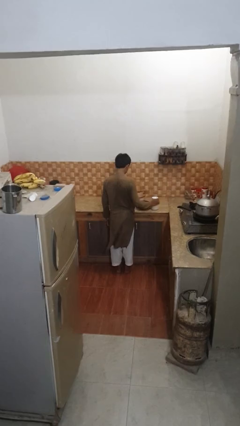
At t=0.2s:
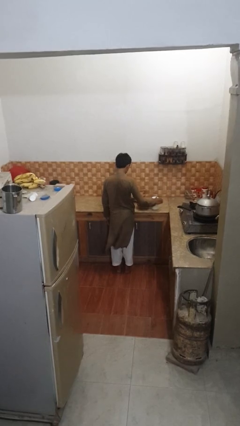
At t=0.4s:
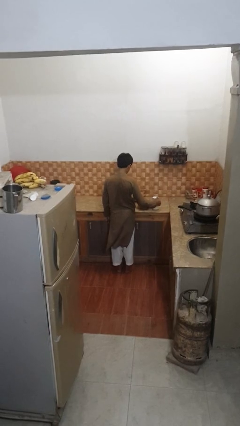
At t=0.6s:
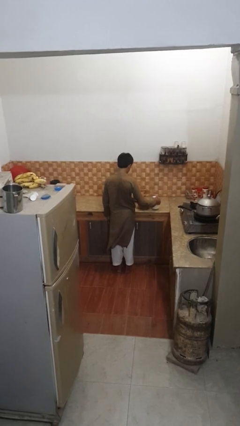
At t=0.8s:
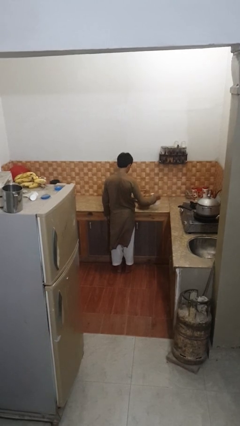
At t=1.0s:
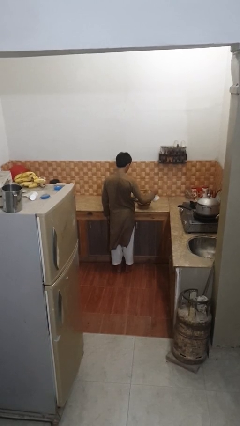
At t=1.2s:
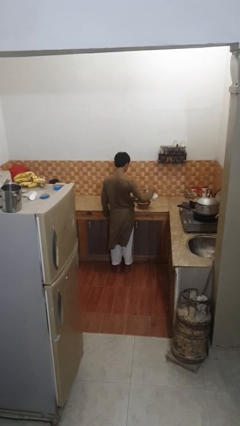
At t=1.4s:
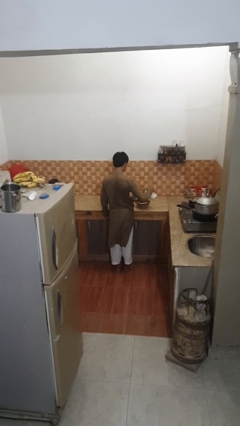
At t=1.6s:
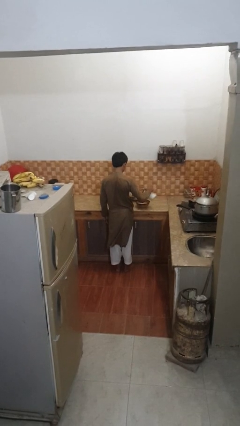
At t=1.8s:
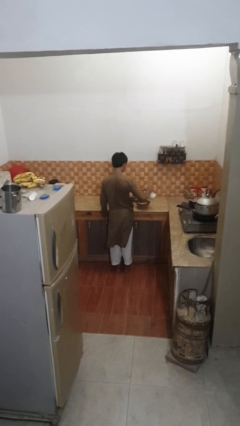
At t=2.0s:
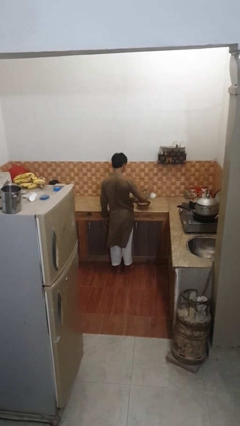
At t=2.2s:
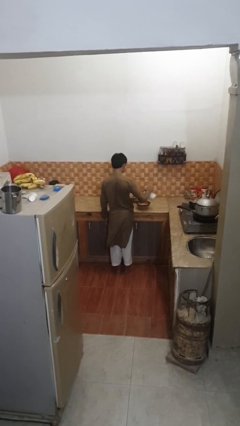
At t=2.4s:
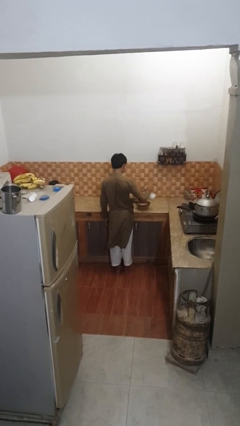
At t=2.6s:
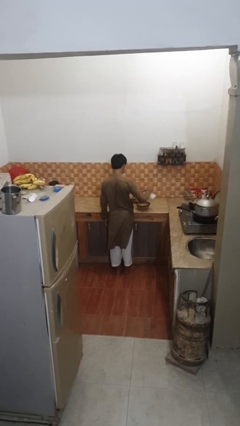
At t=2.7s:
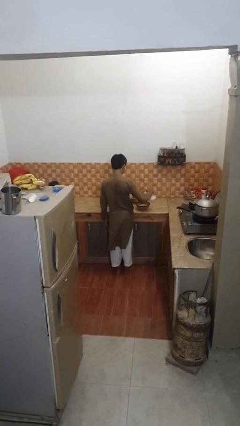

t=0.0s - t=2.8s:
person pours into bowl

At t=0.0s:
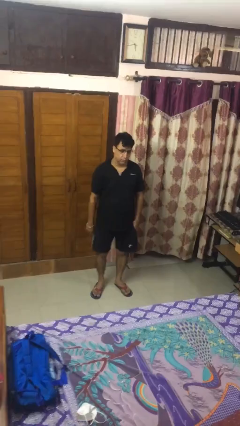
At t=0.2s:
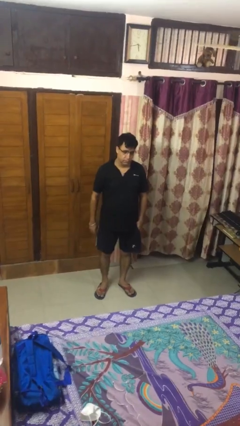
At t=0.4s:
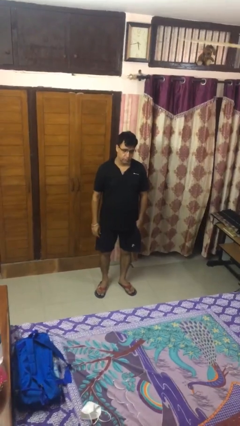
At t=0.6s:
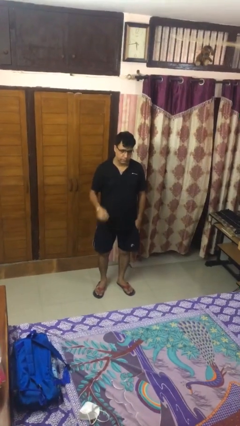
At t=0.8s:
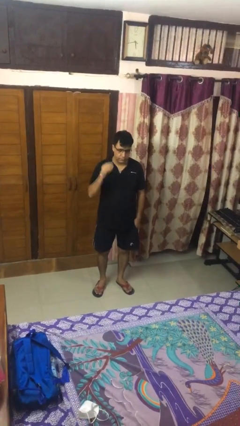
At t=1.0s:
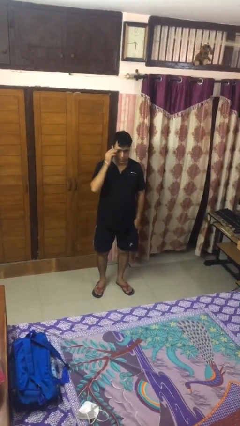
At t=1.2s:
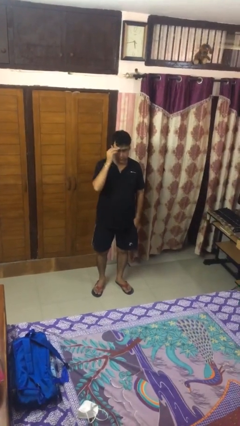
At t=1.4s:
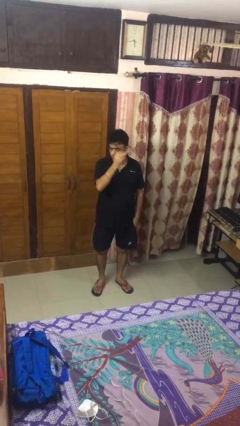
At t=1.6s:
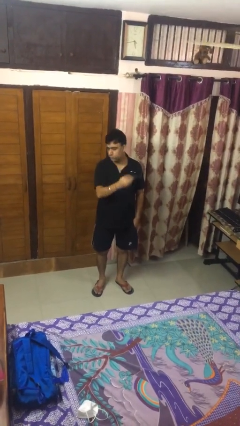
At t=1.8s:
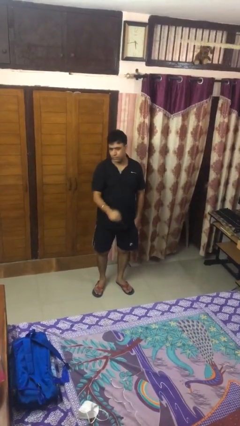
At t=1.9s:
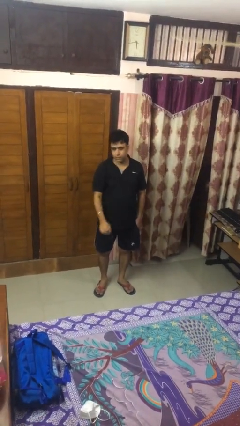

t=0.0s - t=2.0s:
person takes off glasses

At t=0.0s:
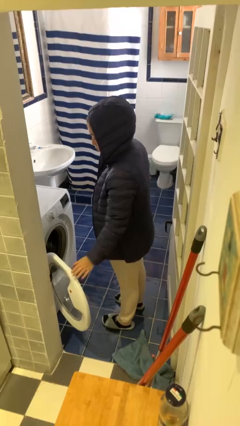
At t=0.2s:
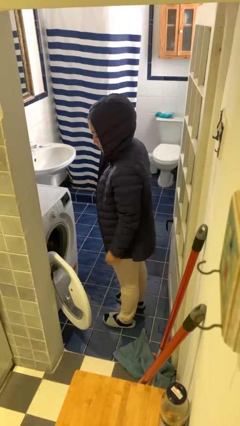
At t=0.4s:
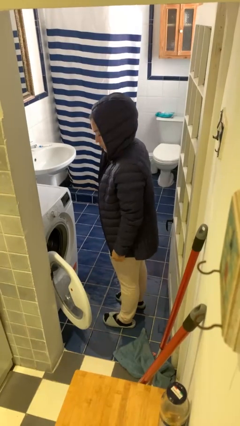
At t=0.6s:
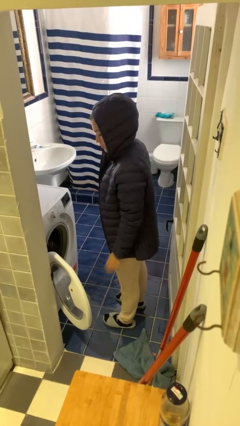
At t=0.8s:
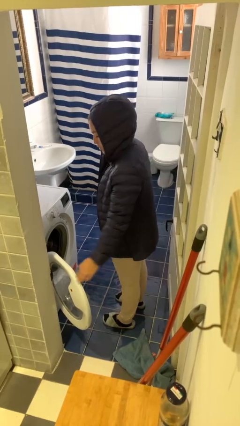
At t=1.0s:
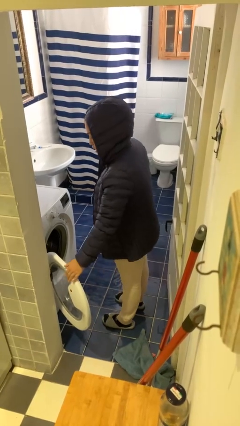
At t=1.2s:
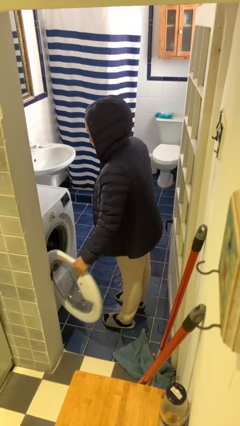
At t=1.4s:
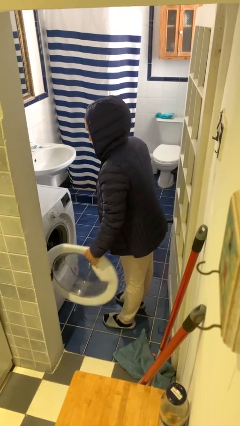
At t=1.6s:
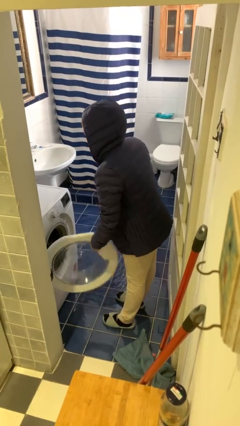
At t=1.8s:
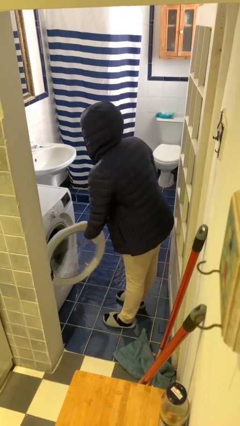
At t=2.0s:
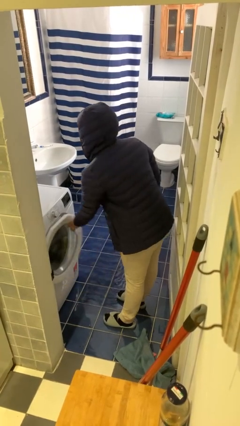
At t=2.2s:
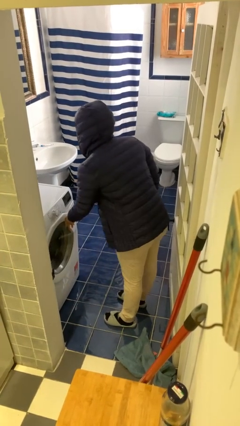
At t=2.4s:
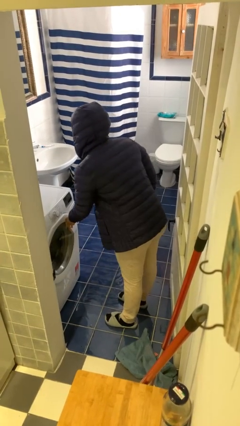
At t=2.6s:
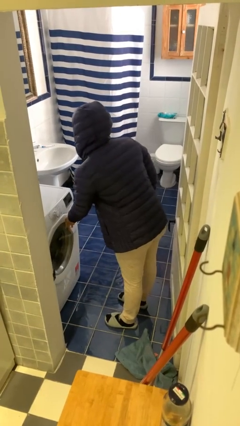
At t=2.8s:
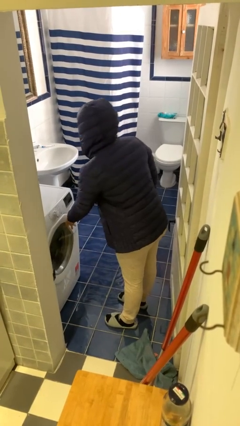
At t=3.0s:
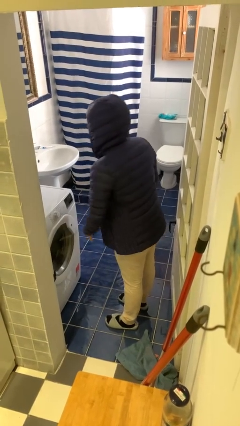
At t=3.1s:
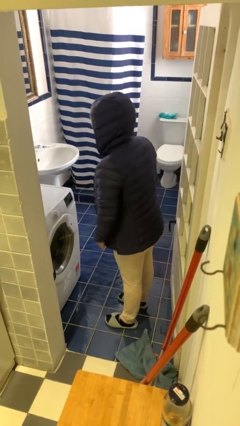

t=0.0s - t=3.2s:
person closes clothes washer

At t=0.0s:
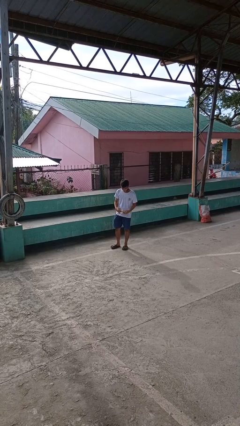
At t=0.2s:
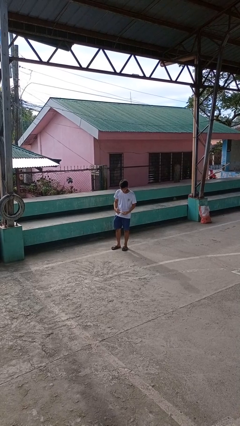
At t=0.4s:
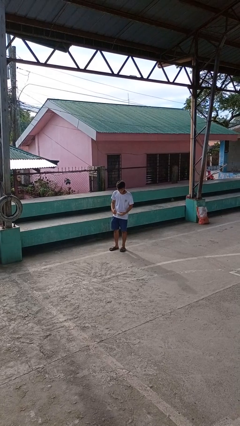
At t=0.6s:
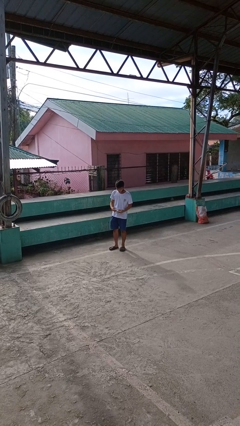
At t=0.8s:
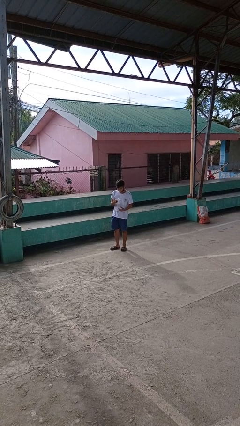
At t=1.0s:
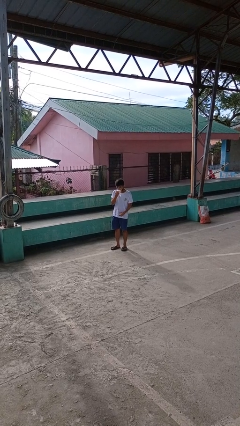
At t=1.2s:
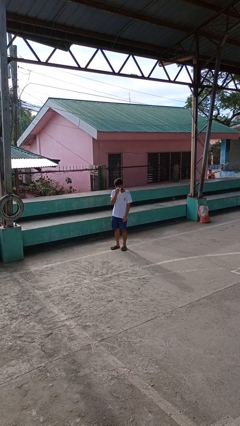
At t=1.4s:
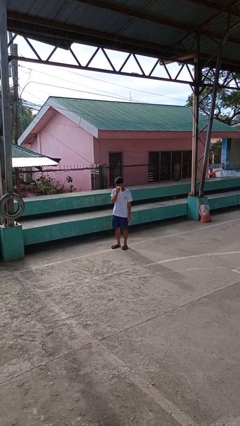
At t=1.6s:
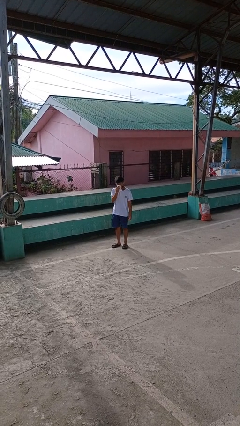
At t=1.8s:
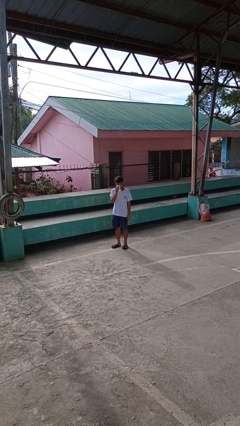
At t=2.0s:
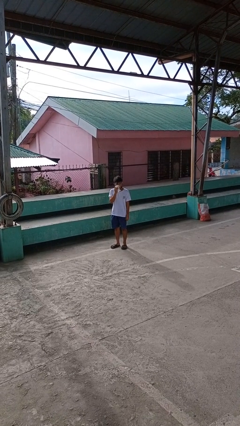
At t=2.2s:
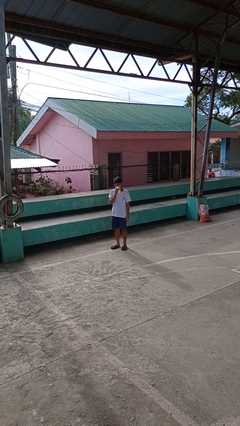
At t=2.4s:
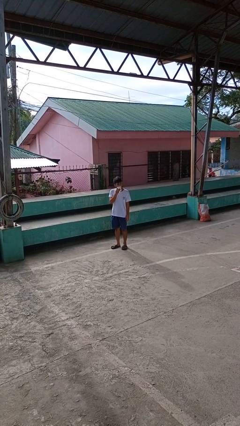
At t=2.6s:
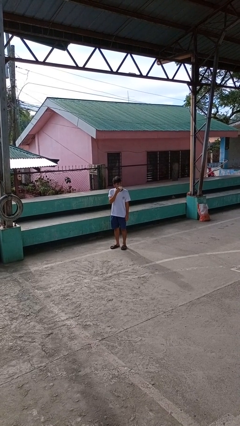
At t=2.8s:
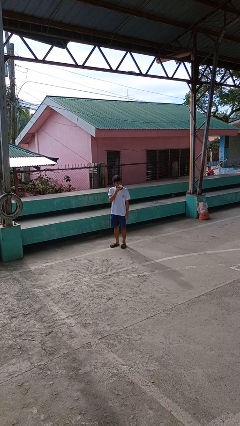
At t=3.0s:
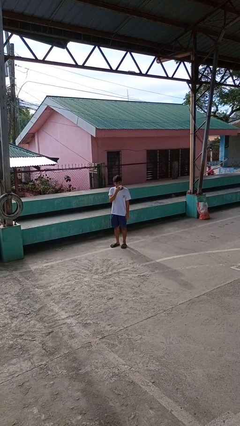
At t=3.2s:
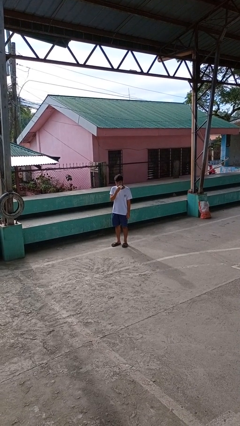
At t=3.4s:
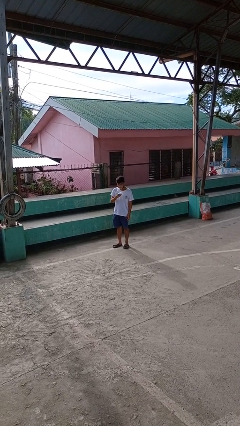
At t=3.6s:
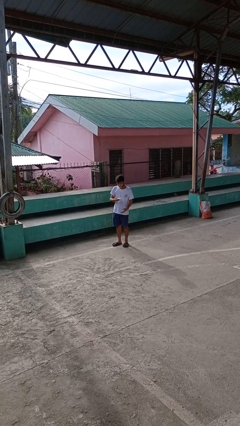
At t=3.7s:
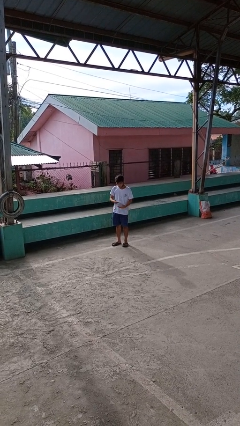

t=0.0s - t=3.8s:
person wipes mouth with napkin

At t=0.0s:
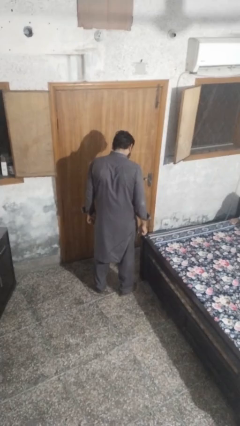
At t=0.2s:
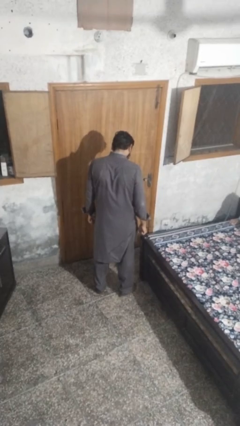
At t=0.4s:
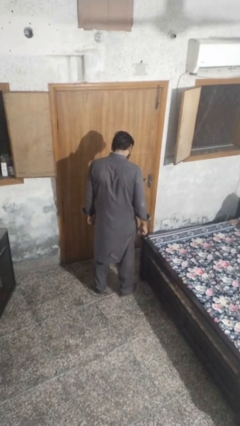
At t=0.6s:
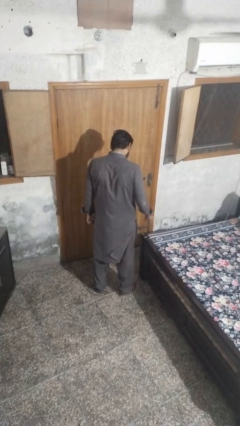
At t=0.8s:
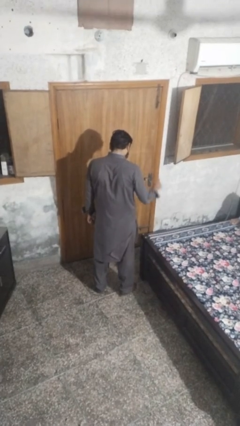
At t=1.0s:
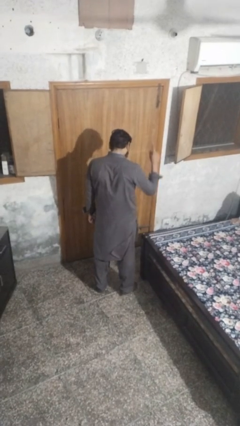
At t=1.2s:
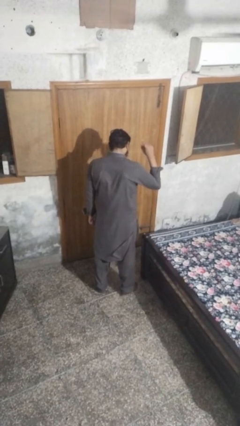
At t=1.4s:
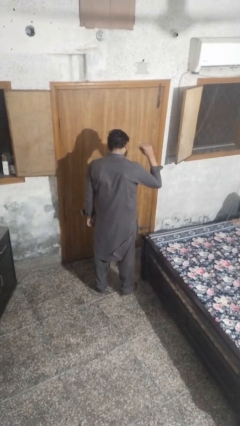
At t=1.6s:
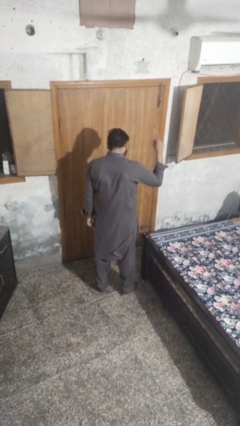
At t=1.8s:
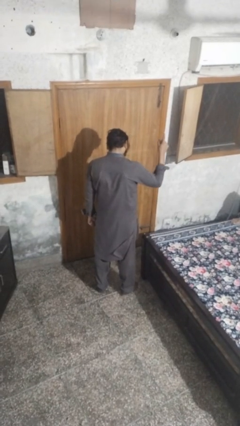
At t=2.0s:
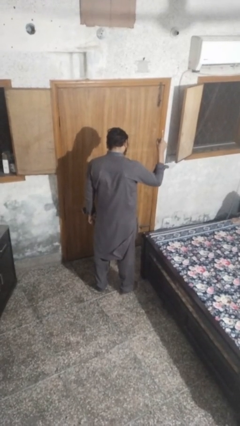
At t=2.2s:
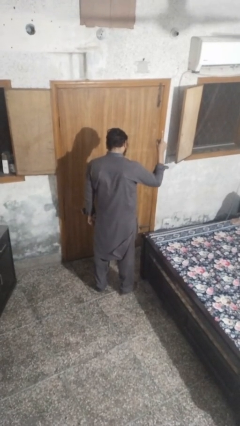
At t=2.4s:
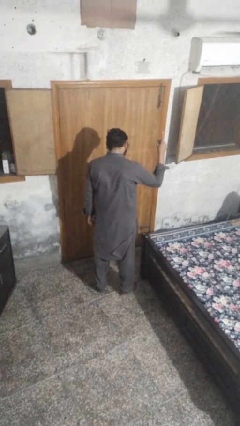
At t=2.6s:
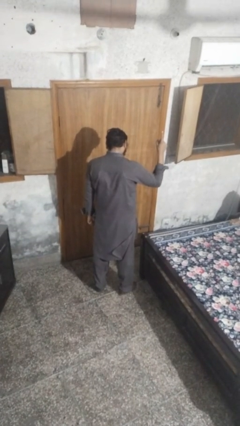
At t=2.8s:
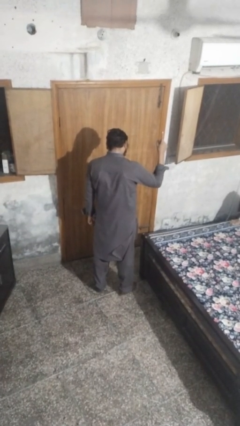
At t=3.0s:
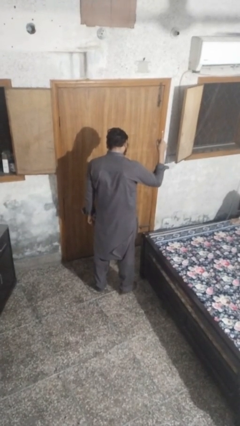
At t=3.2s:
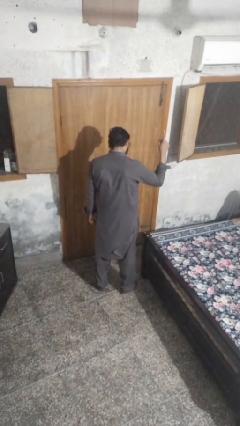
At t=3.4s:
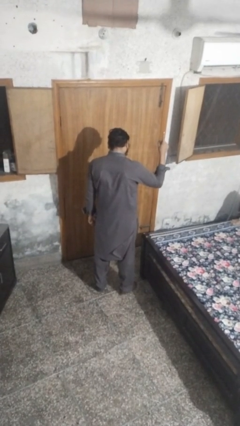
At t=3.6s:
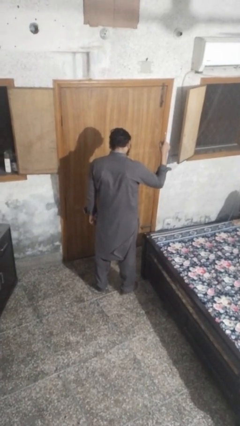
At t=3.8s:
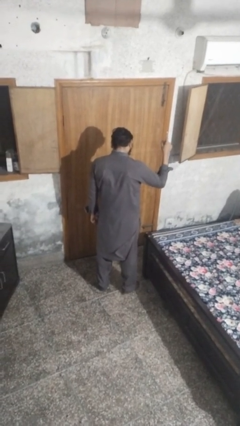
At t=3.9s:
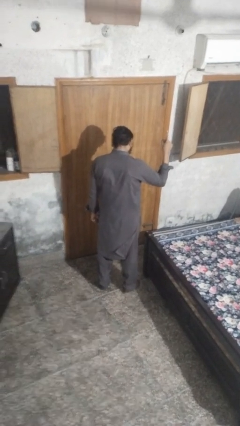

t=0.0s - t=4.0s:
person gestures number one

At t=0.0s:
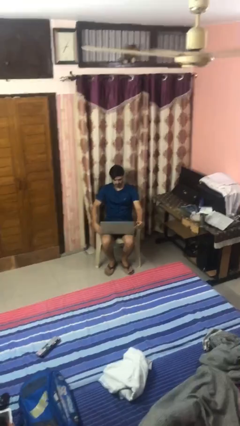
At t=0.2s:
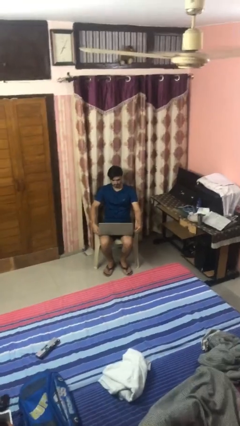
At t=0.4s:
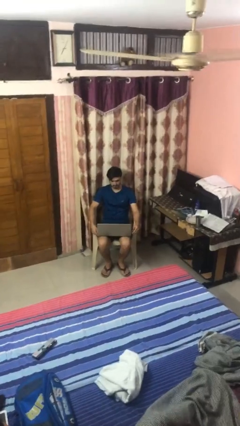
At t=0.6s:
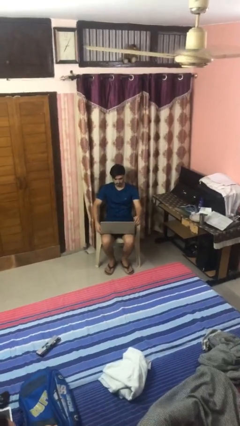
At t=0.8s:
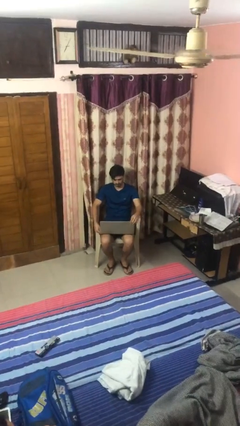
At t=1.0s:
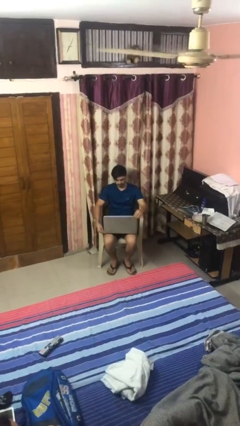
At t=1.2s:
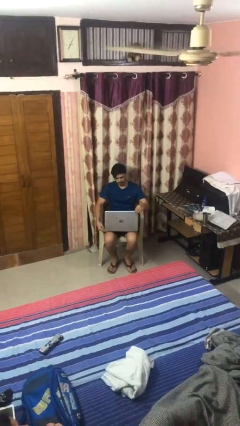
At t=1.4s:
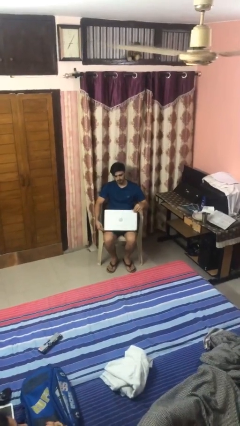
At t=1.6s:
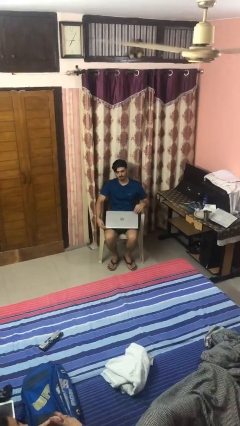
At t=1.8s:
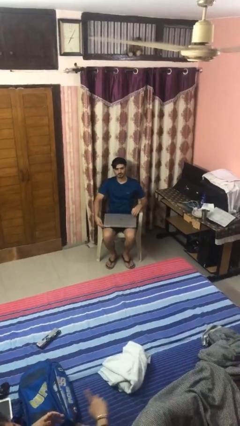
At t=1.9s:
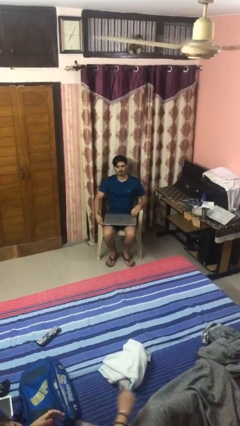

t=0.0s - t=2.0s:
person closes laptop
